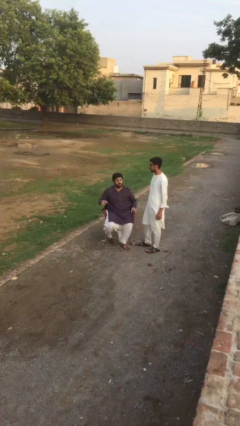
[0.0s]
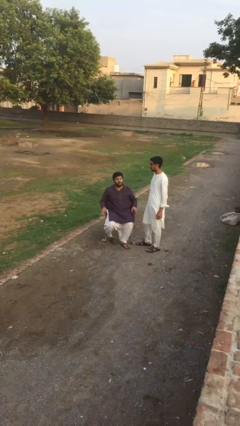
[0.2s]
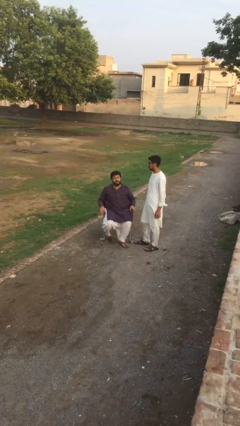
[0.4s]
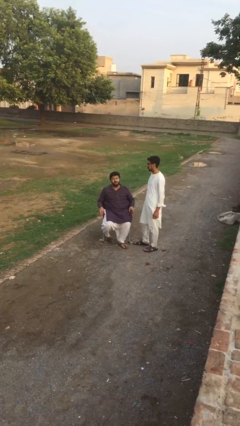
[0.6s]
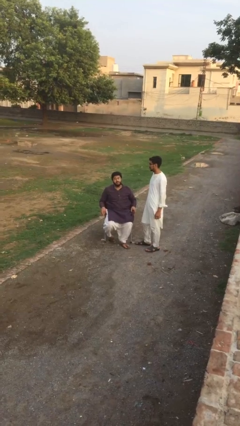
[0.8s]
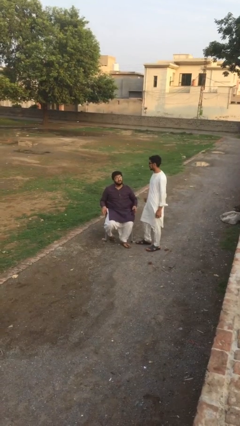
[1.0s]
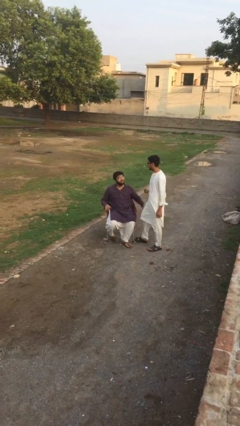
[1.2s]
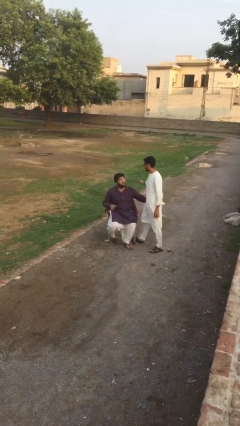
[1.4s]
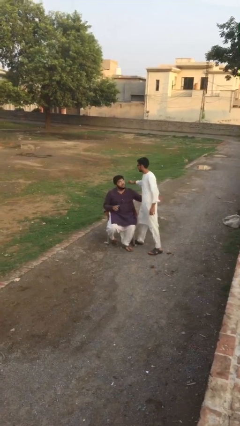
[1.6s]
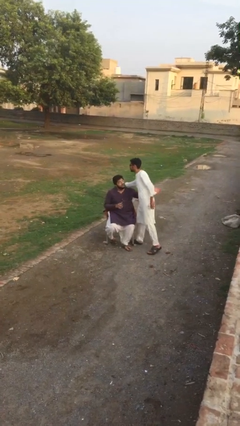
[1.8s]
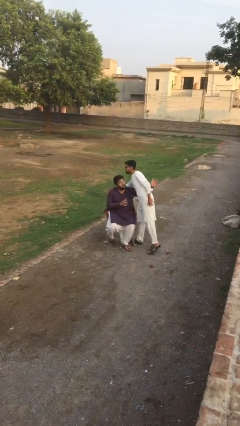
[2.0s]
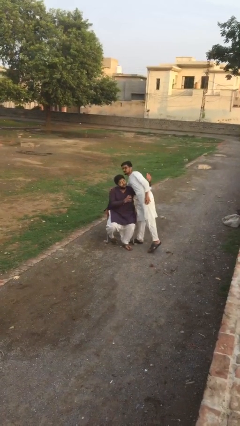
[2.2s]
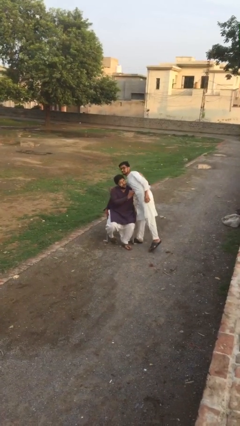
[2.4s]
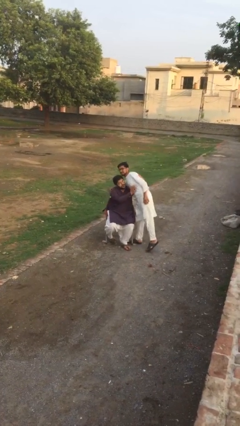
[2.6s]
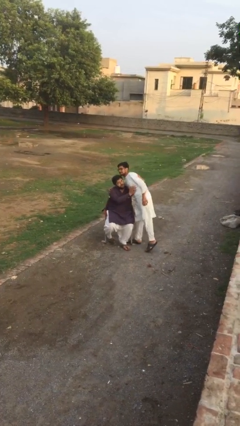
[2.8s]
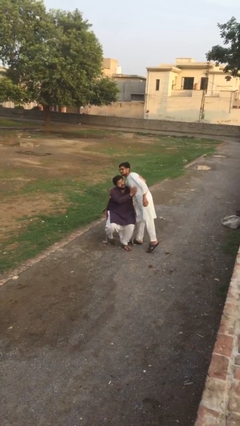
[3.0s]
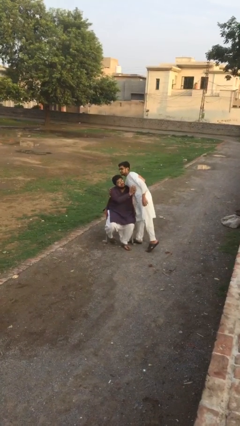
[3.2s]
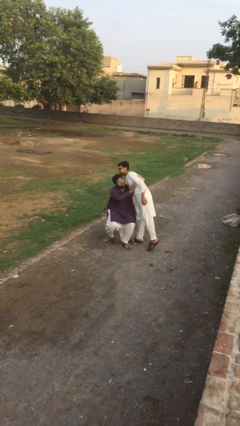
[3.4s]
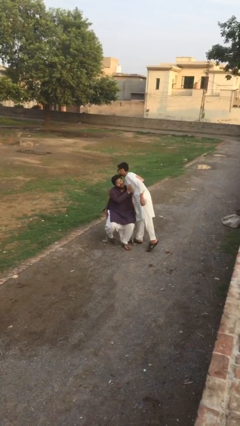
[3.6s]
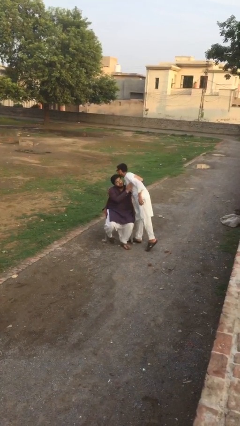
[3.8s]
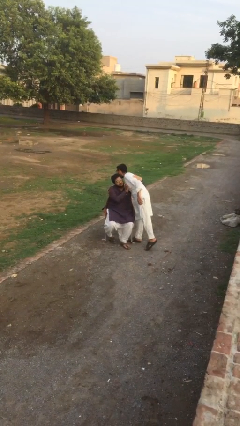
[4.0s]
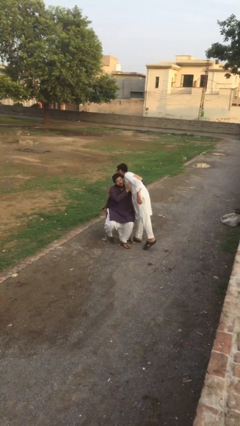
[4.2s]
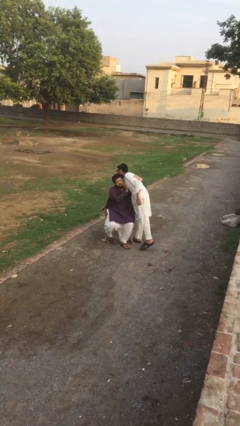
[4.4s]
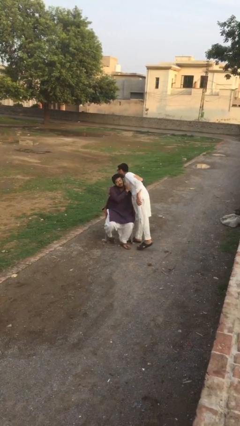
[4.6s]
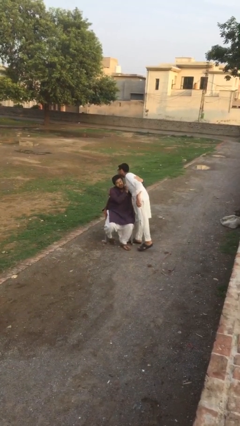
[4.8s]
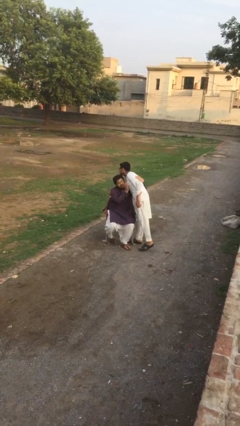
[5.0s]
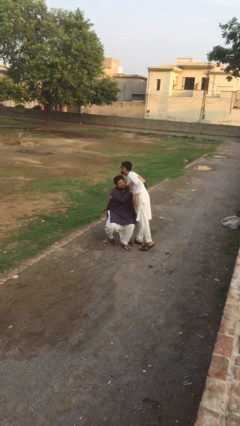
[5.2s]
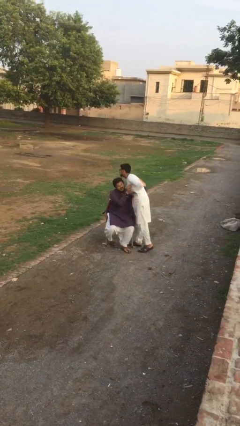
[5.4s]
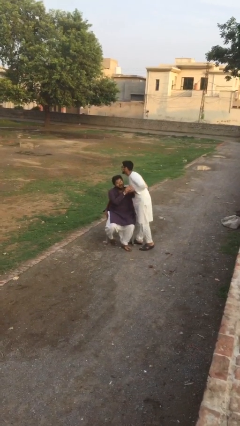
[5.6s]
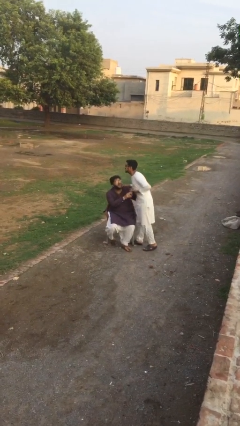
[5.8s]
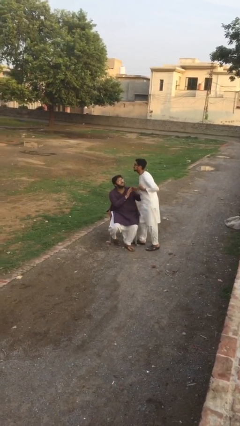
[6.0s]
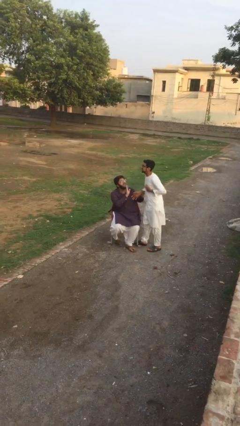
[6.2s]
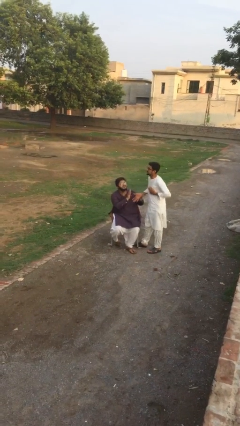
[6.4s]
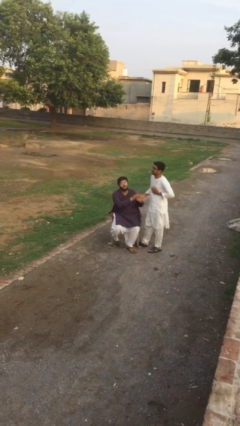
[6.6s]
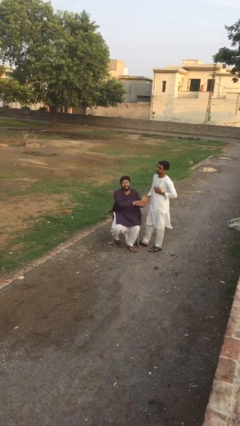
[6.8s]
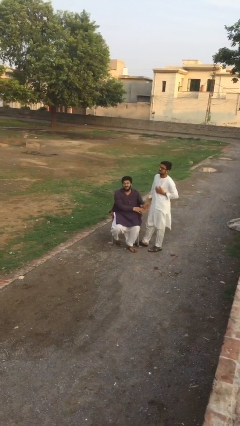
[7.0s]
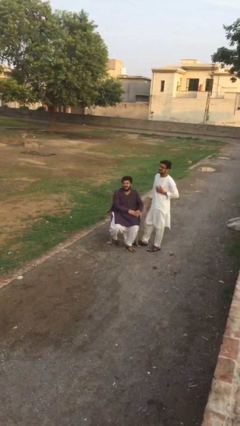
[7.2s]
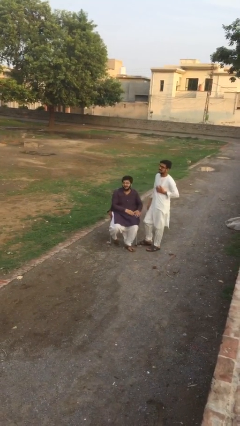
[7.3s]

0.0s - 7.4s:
person embraces person

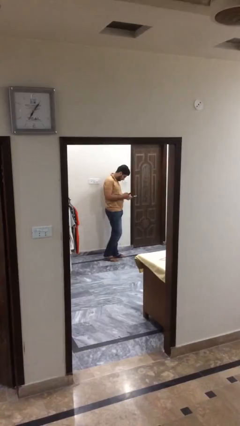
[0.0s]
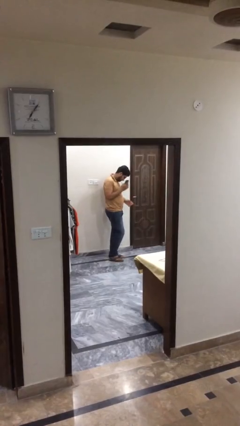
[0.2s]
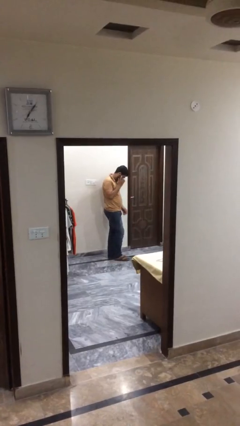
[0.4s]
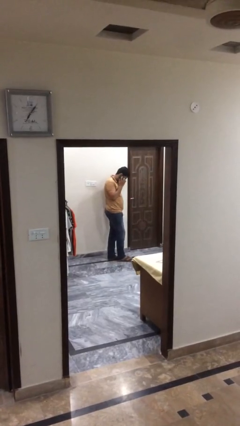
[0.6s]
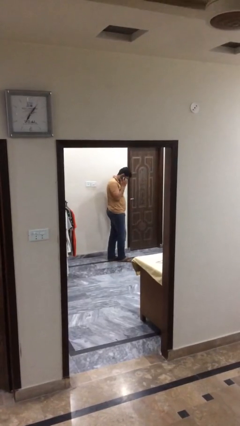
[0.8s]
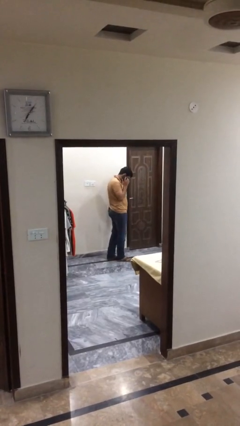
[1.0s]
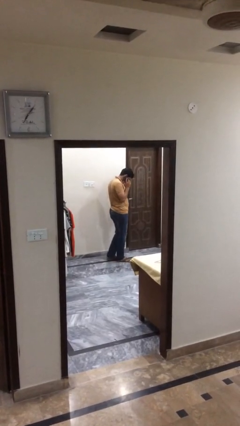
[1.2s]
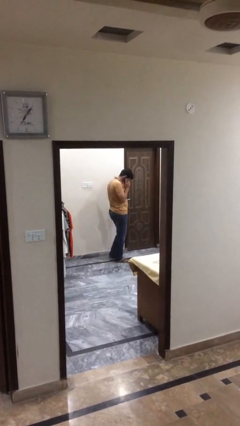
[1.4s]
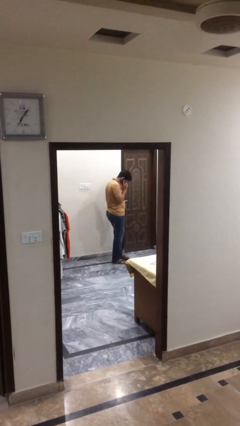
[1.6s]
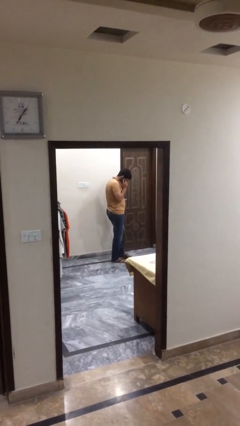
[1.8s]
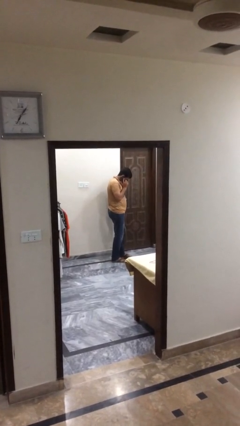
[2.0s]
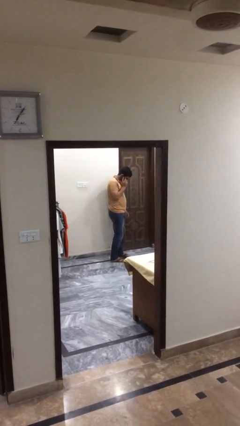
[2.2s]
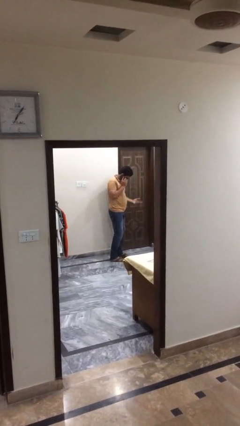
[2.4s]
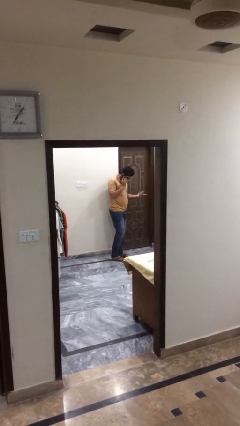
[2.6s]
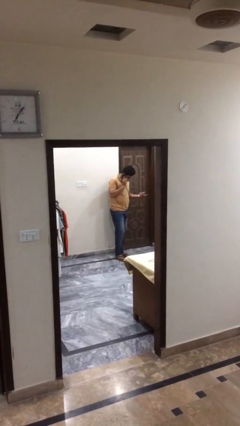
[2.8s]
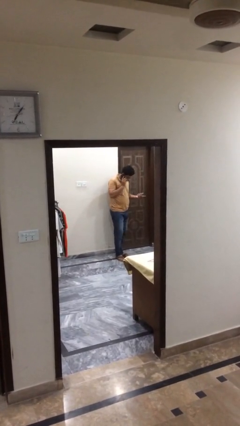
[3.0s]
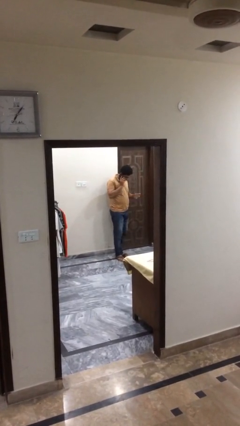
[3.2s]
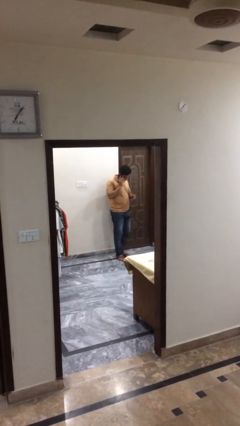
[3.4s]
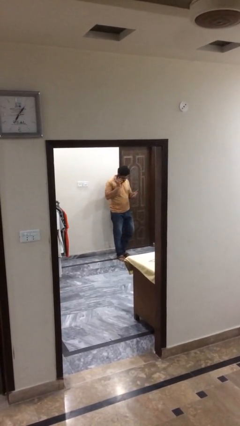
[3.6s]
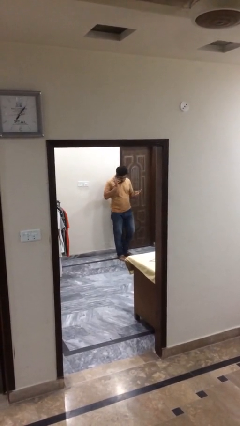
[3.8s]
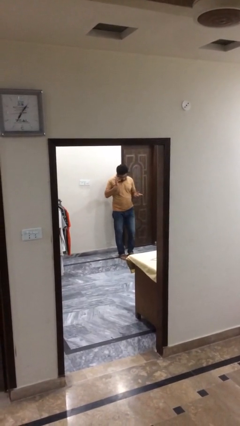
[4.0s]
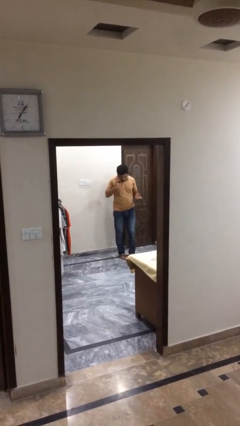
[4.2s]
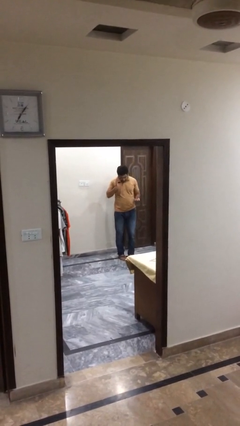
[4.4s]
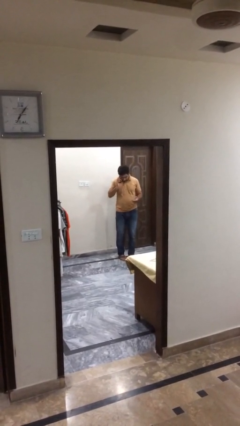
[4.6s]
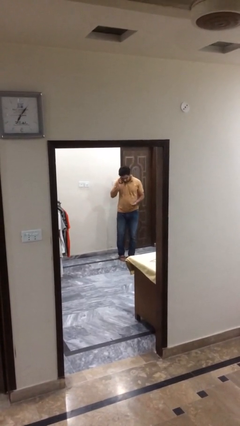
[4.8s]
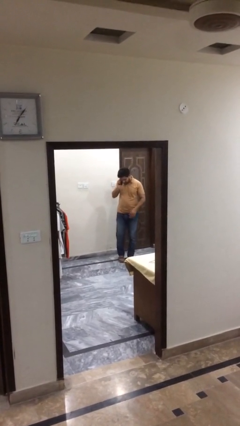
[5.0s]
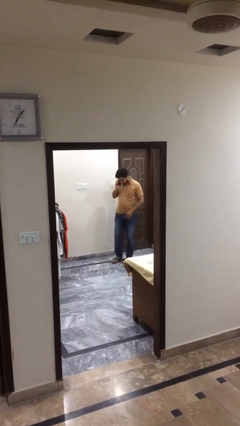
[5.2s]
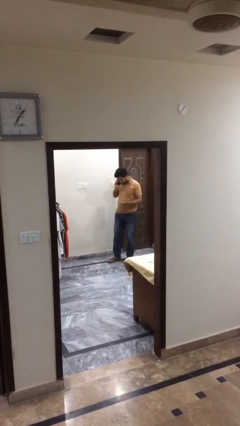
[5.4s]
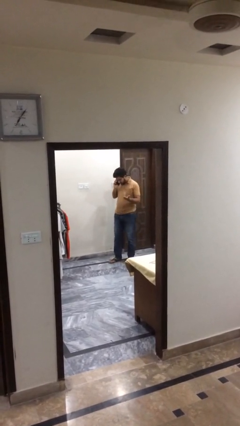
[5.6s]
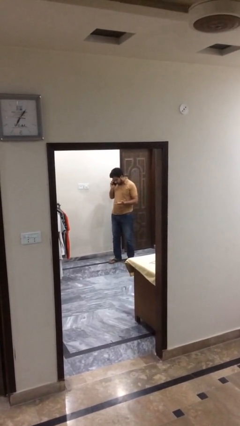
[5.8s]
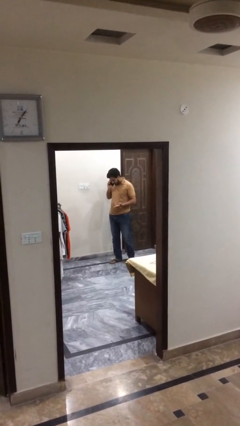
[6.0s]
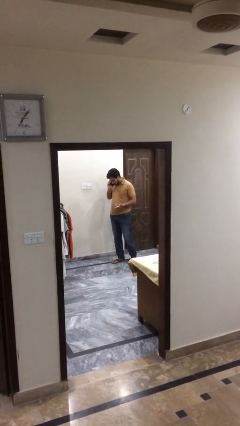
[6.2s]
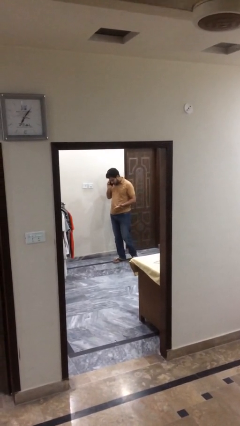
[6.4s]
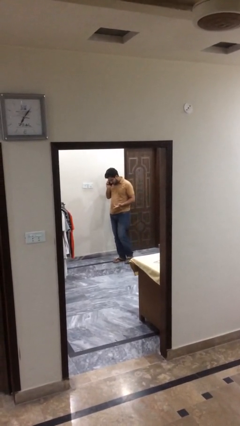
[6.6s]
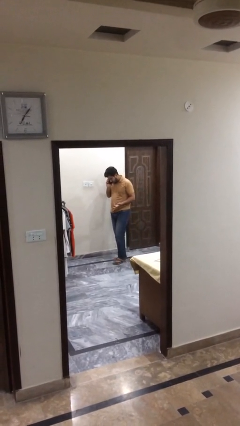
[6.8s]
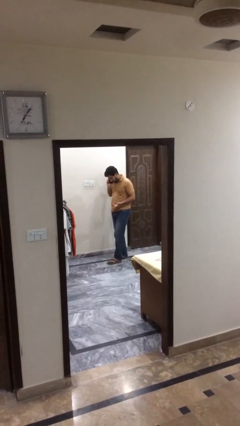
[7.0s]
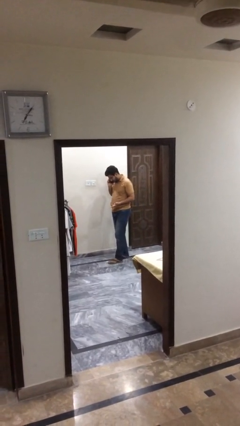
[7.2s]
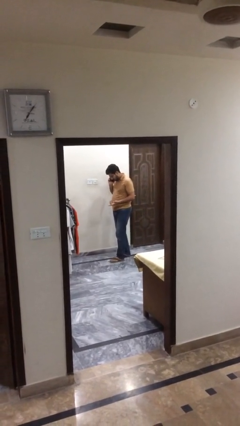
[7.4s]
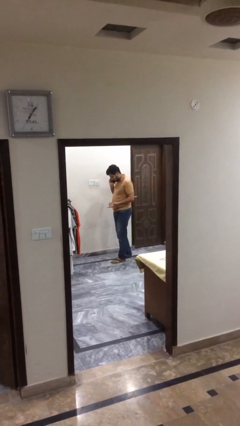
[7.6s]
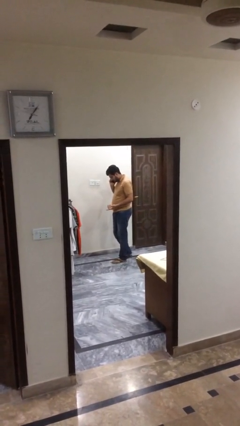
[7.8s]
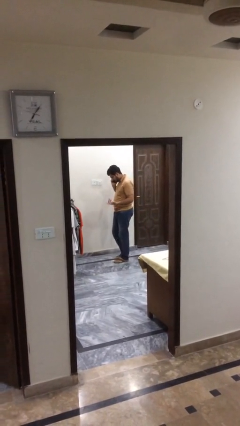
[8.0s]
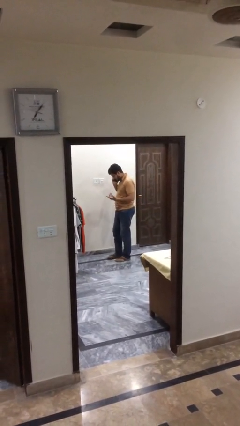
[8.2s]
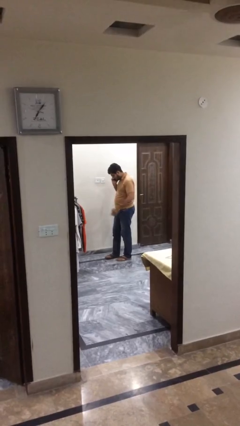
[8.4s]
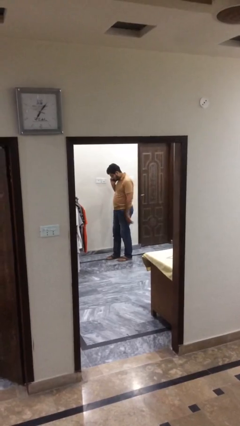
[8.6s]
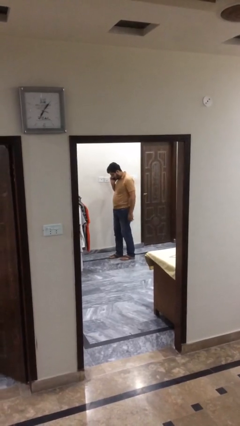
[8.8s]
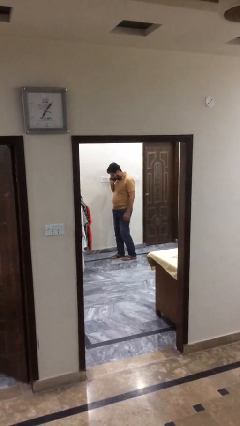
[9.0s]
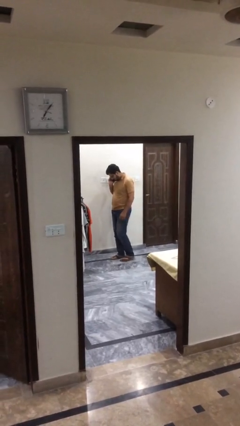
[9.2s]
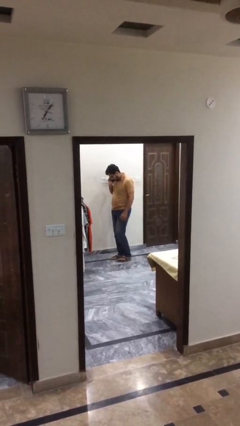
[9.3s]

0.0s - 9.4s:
person talks on phone

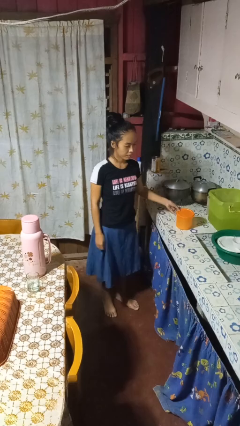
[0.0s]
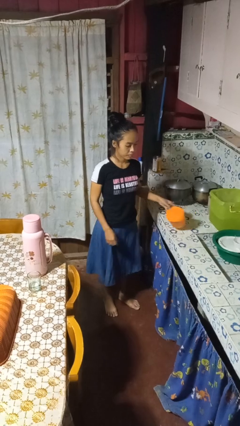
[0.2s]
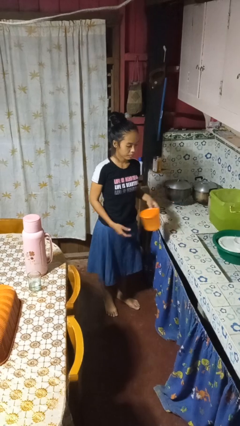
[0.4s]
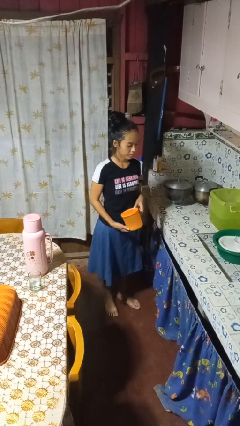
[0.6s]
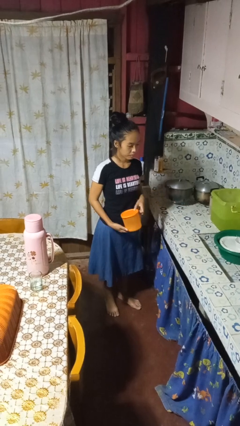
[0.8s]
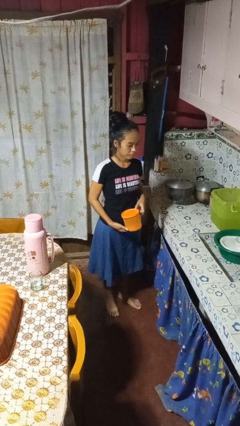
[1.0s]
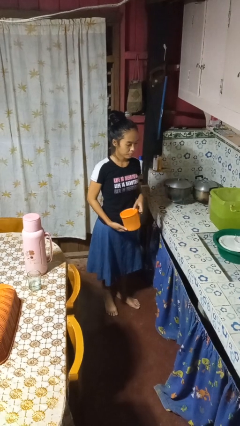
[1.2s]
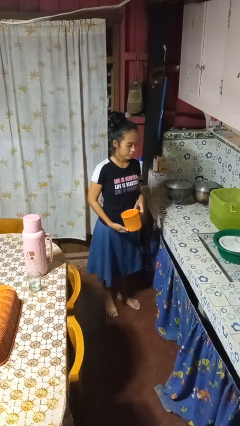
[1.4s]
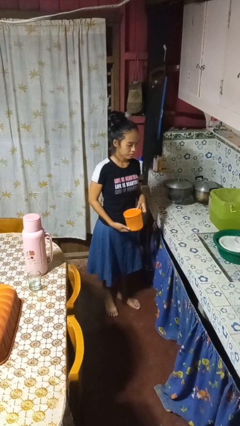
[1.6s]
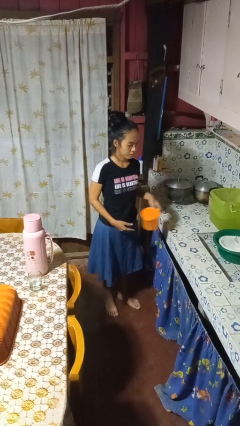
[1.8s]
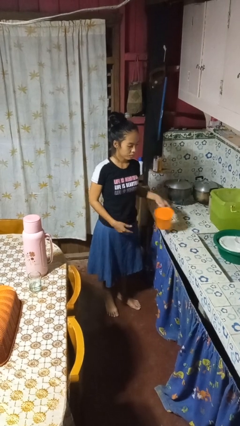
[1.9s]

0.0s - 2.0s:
person picks up object from countertop
